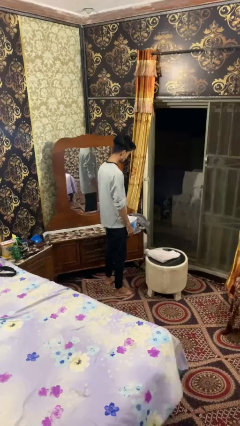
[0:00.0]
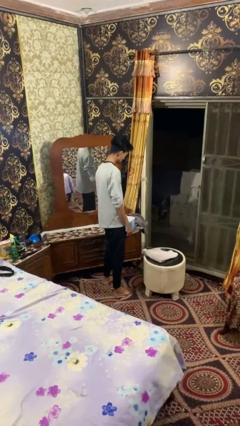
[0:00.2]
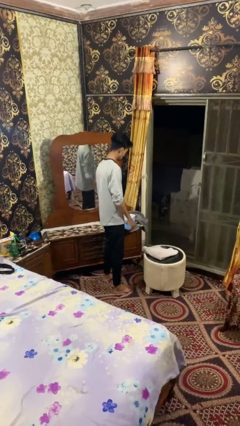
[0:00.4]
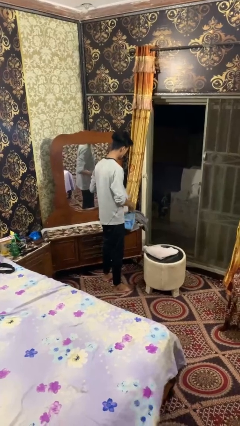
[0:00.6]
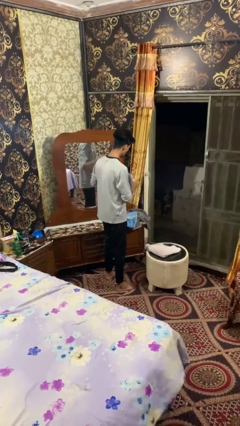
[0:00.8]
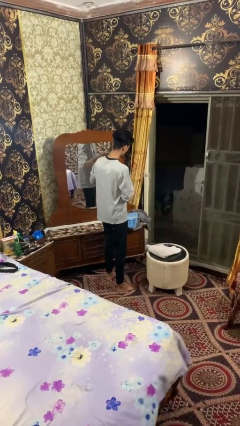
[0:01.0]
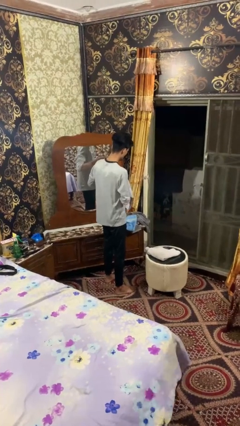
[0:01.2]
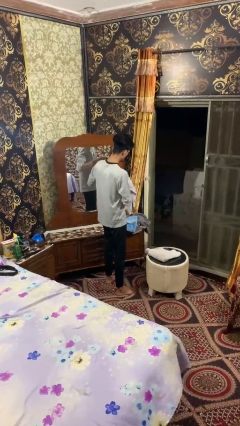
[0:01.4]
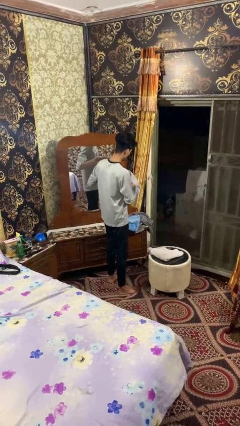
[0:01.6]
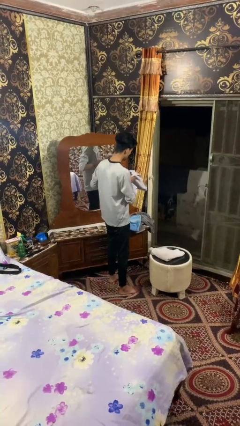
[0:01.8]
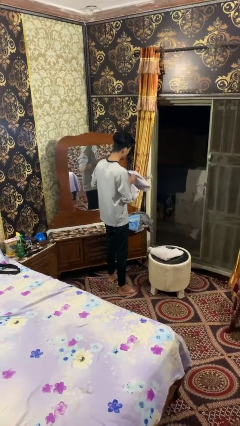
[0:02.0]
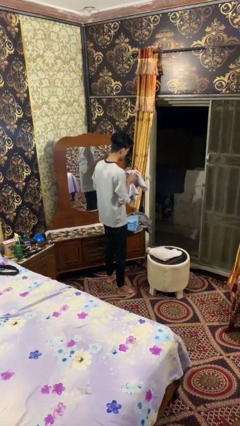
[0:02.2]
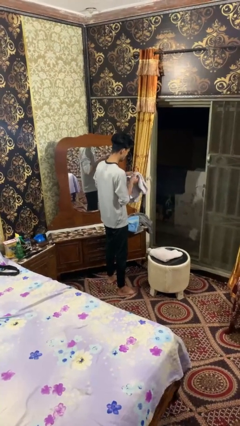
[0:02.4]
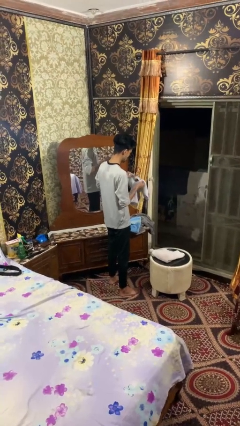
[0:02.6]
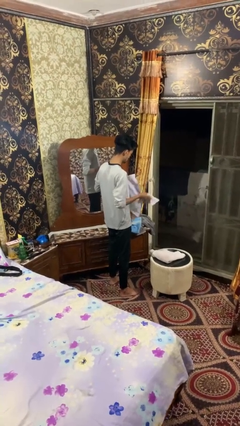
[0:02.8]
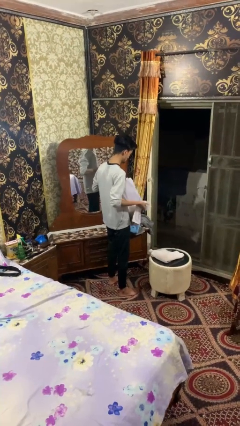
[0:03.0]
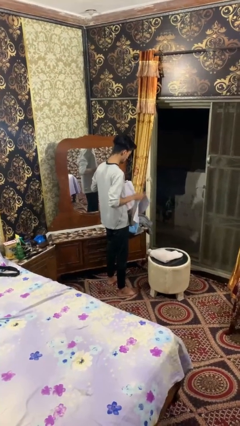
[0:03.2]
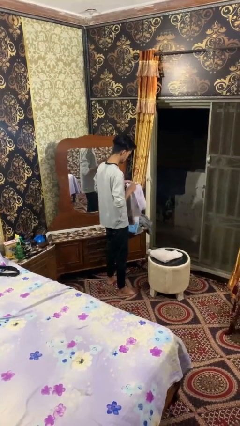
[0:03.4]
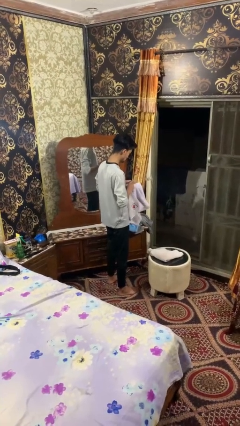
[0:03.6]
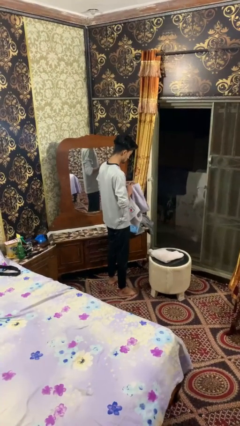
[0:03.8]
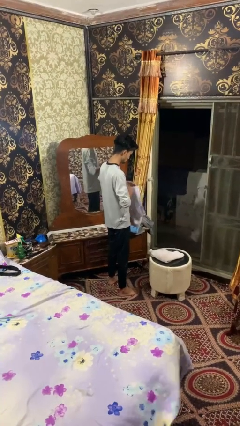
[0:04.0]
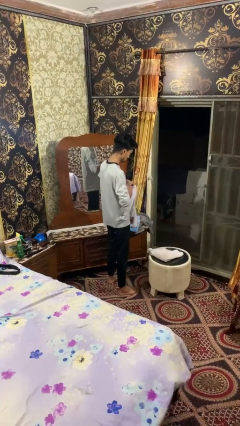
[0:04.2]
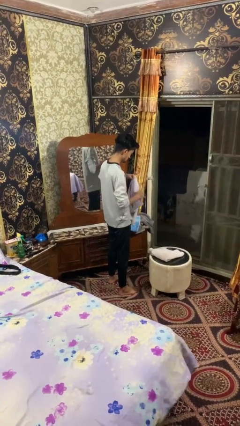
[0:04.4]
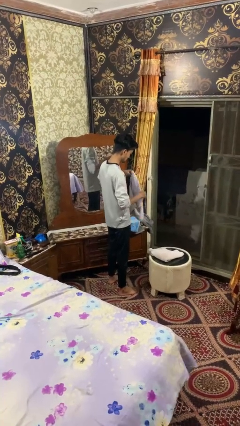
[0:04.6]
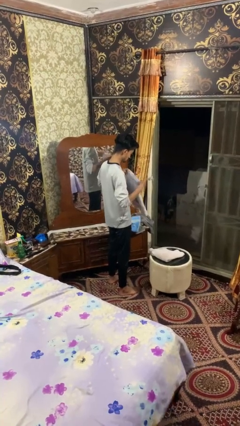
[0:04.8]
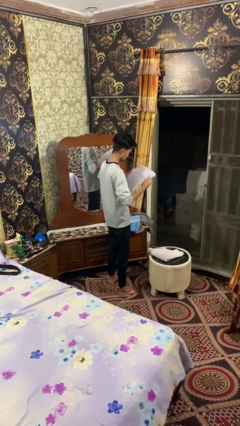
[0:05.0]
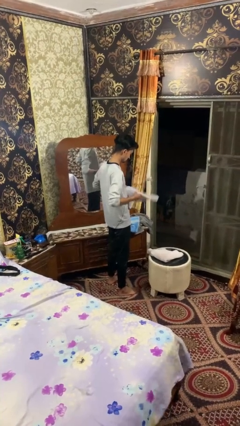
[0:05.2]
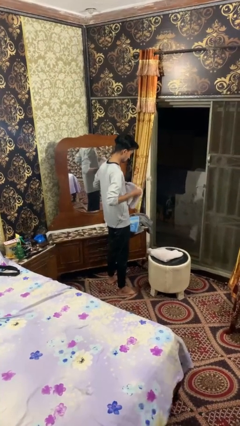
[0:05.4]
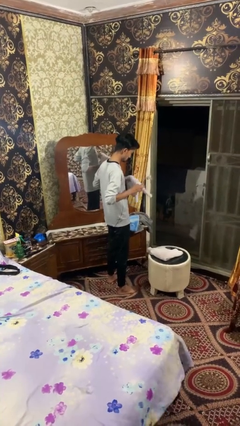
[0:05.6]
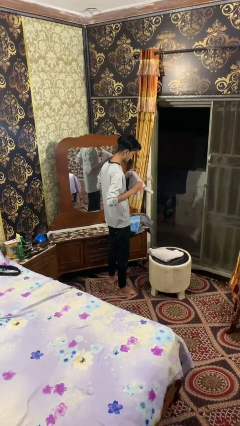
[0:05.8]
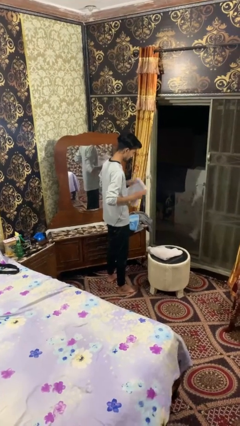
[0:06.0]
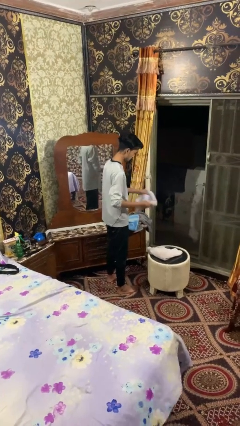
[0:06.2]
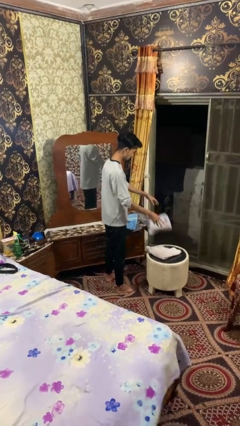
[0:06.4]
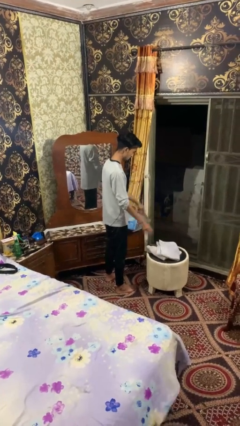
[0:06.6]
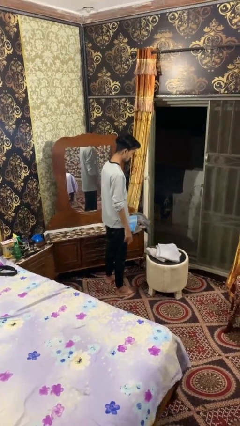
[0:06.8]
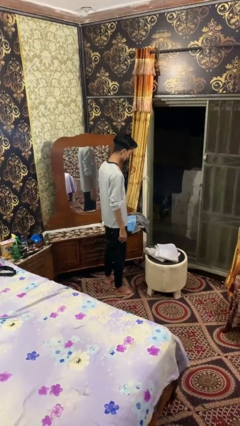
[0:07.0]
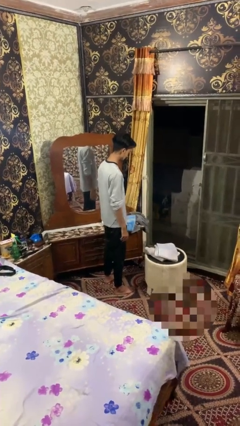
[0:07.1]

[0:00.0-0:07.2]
person folds towel

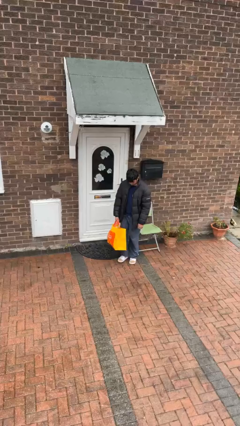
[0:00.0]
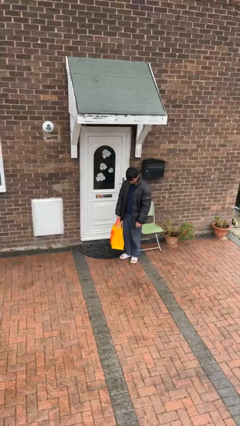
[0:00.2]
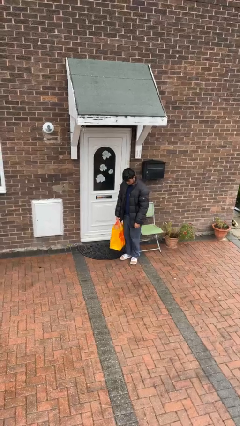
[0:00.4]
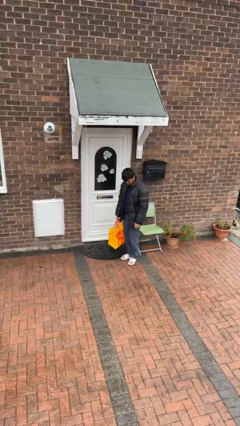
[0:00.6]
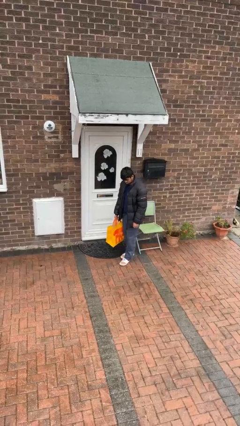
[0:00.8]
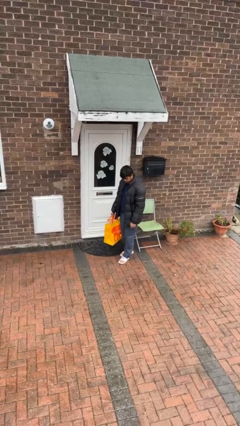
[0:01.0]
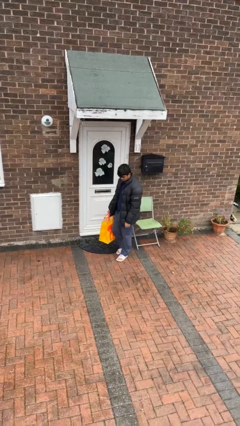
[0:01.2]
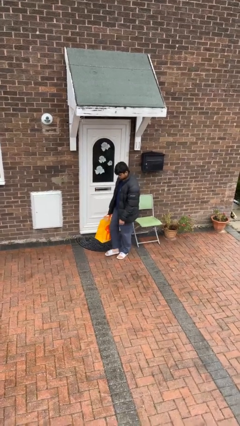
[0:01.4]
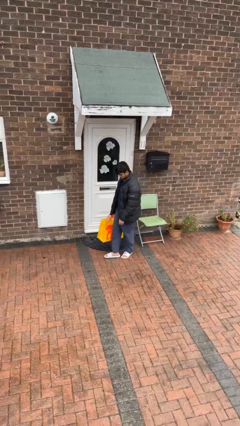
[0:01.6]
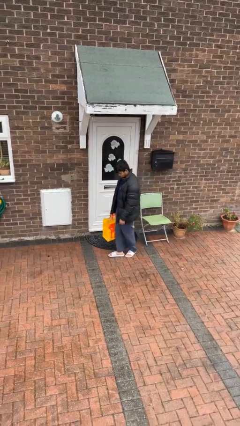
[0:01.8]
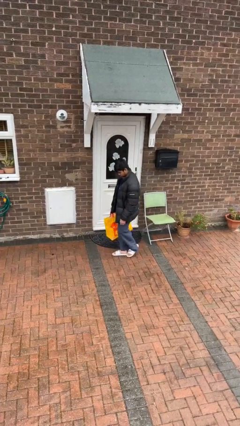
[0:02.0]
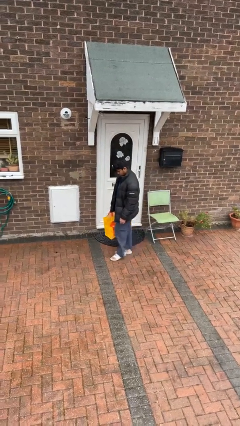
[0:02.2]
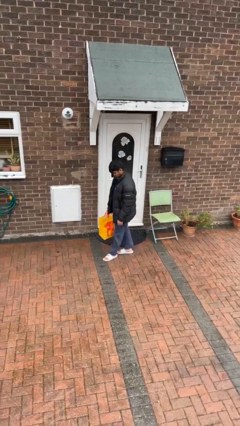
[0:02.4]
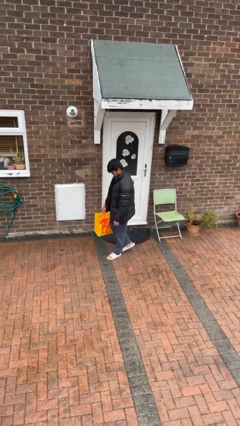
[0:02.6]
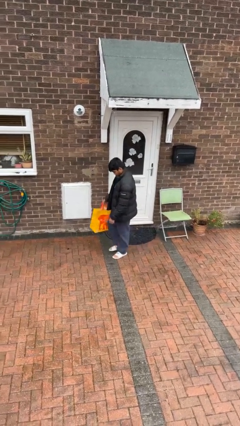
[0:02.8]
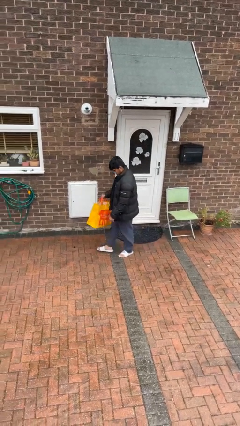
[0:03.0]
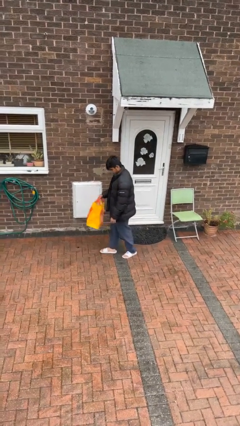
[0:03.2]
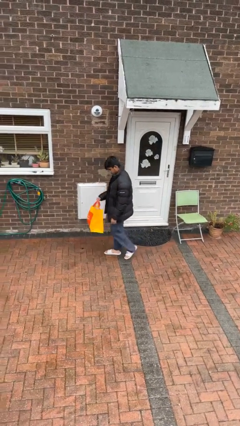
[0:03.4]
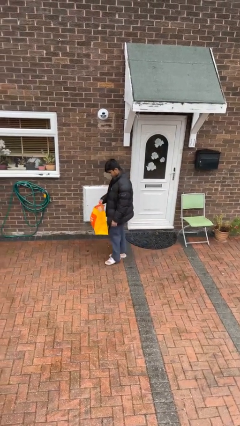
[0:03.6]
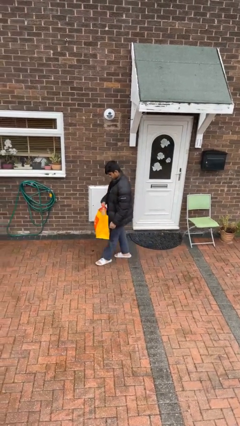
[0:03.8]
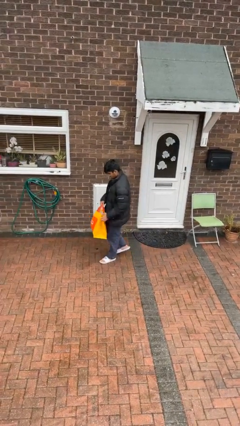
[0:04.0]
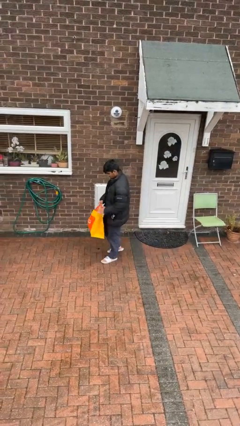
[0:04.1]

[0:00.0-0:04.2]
person carries groceries

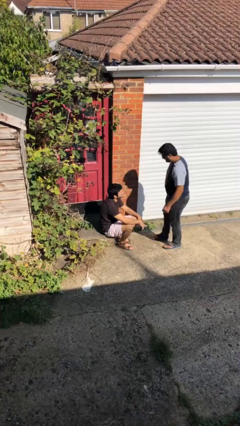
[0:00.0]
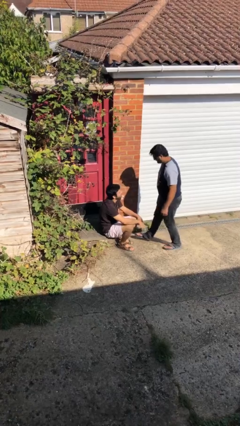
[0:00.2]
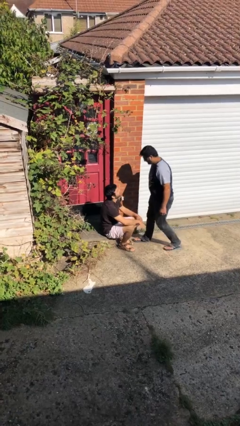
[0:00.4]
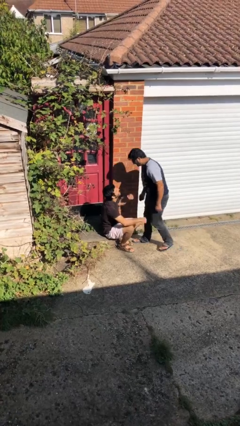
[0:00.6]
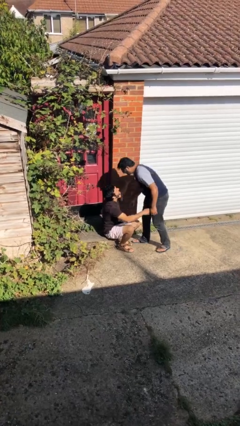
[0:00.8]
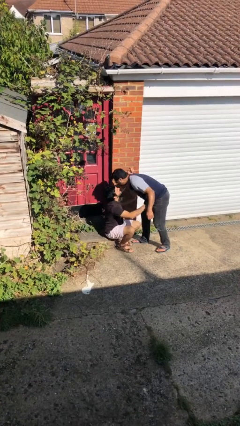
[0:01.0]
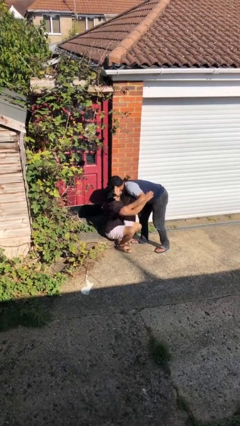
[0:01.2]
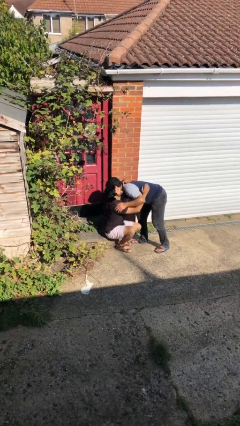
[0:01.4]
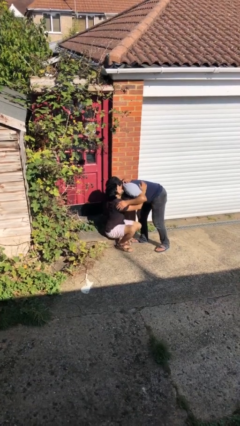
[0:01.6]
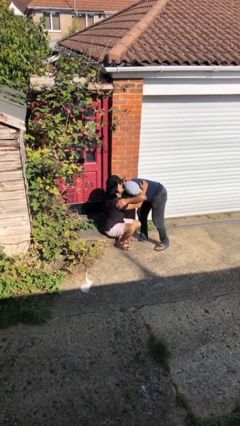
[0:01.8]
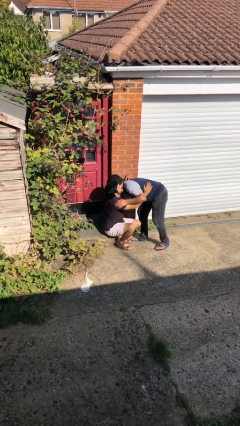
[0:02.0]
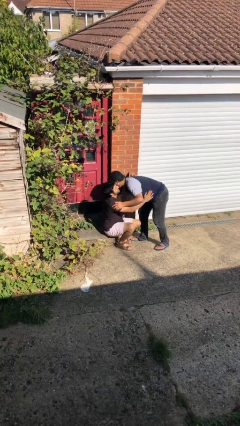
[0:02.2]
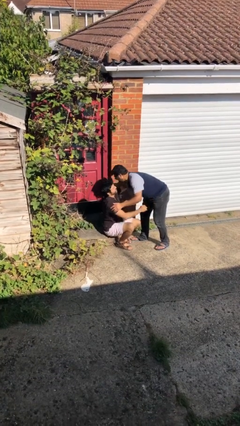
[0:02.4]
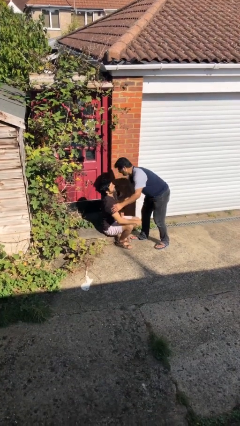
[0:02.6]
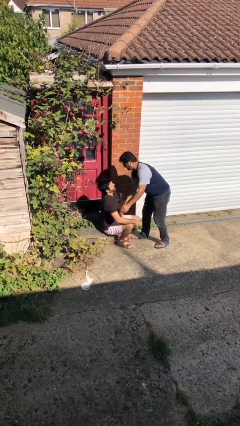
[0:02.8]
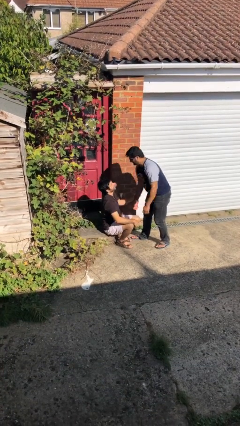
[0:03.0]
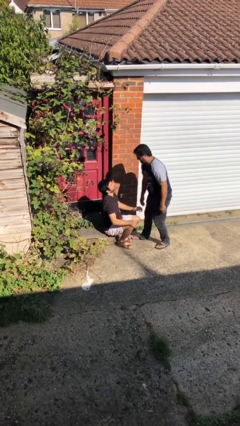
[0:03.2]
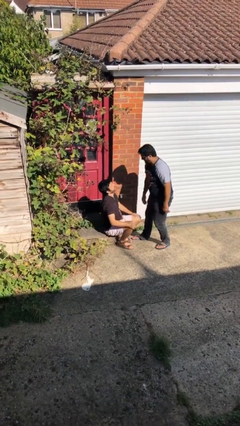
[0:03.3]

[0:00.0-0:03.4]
person embraces person

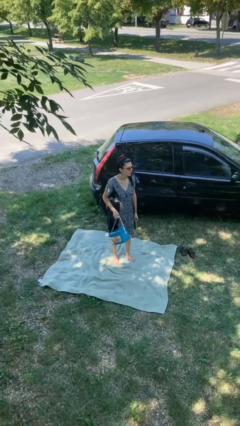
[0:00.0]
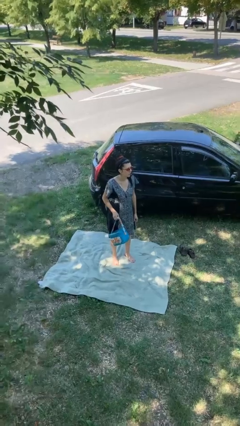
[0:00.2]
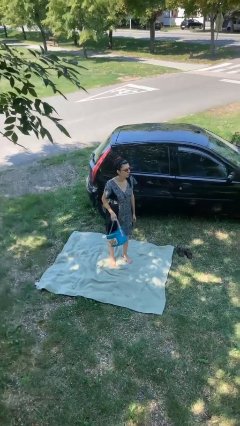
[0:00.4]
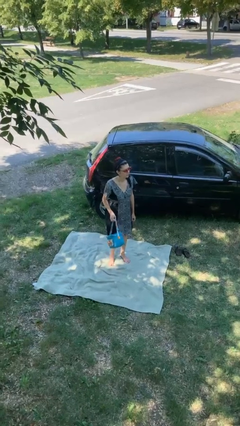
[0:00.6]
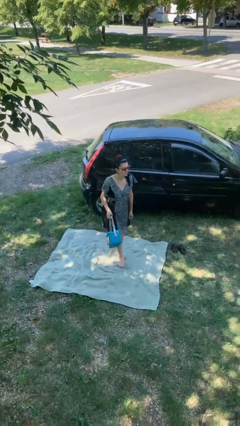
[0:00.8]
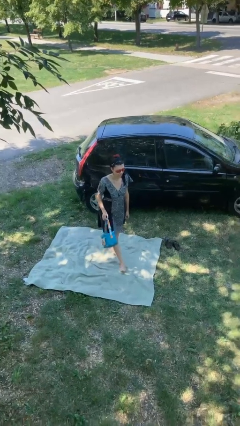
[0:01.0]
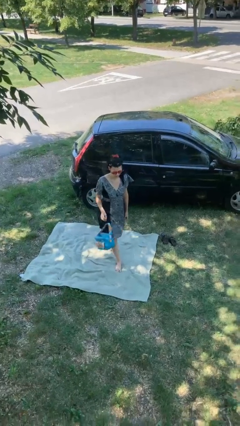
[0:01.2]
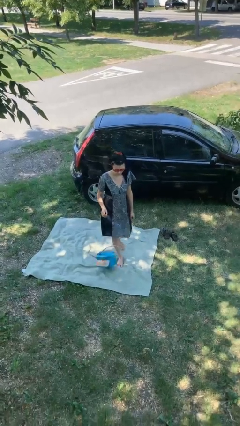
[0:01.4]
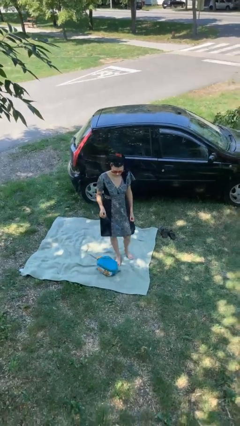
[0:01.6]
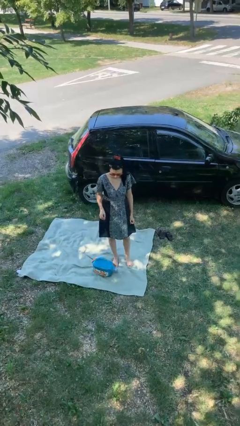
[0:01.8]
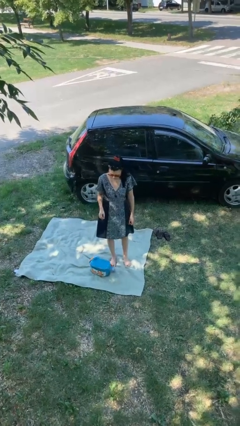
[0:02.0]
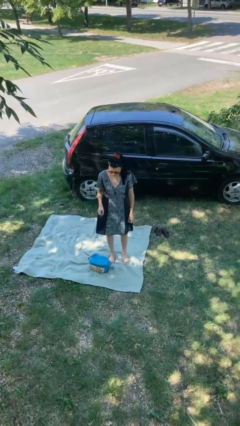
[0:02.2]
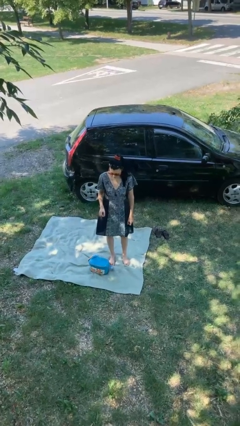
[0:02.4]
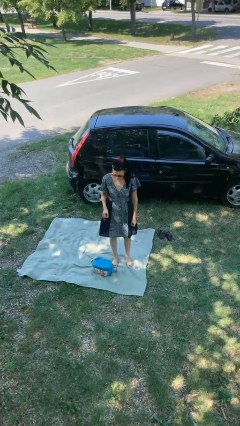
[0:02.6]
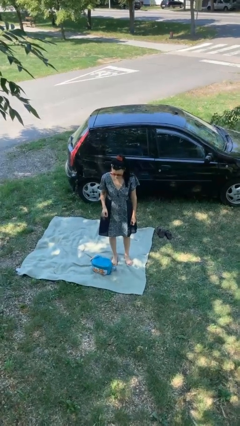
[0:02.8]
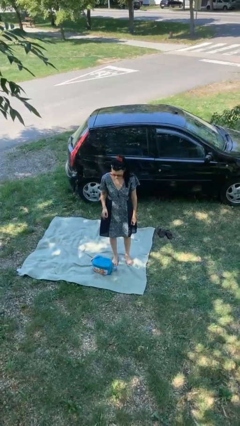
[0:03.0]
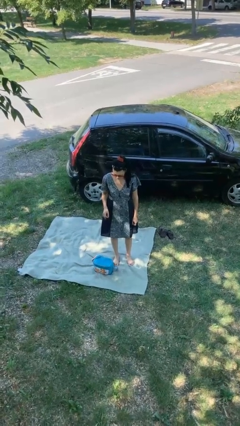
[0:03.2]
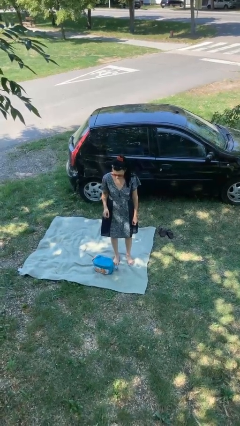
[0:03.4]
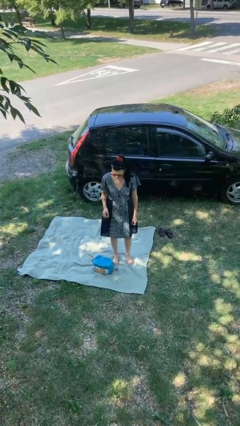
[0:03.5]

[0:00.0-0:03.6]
person drops object
